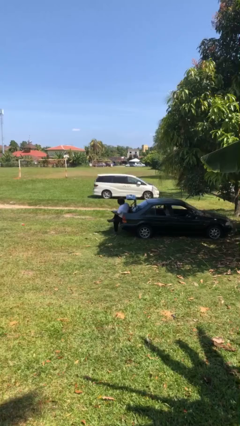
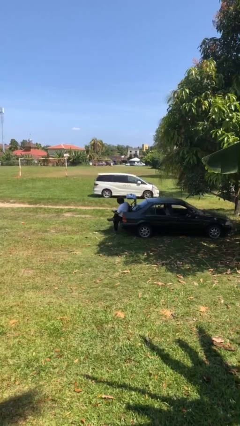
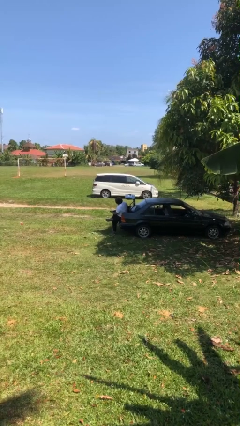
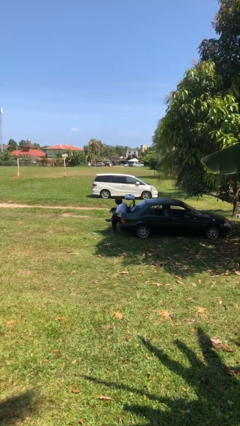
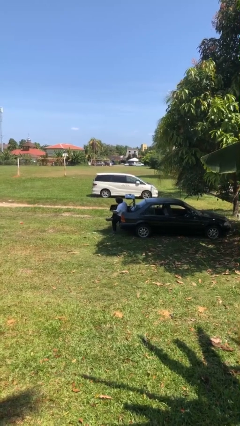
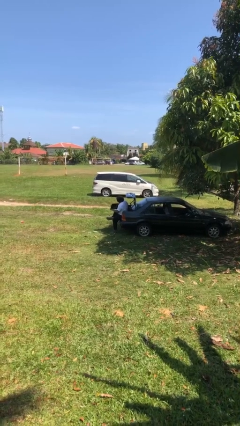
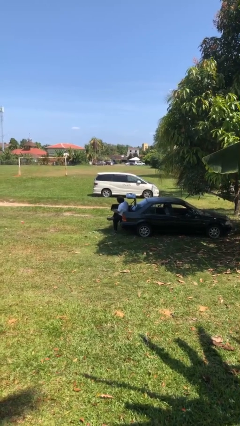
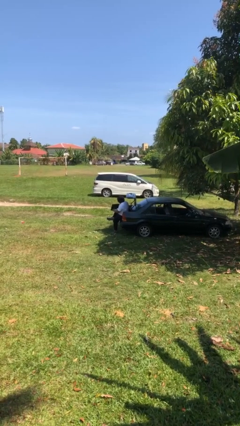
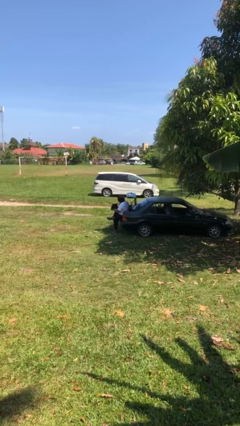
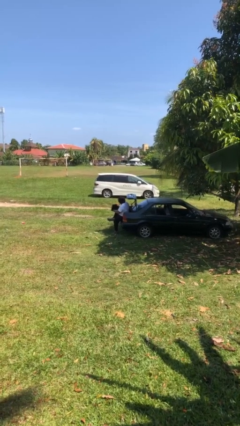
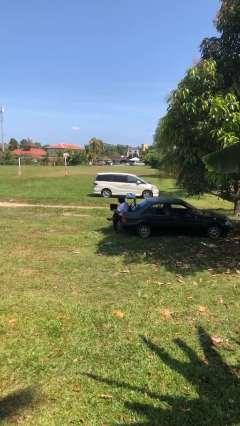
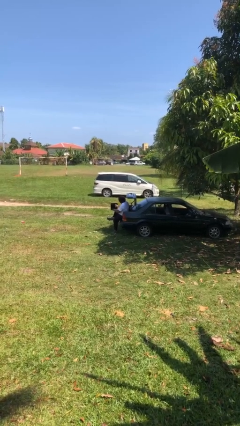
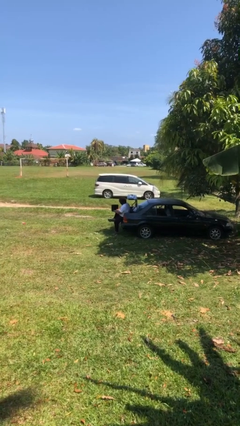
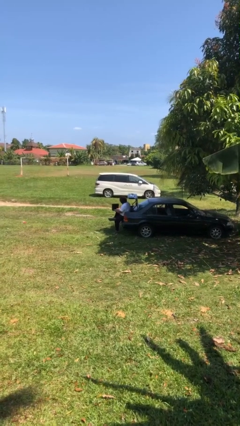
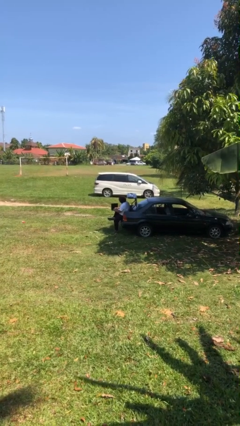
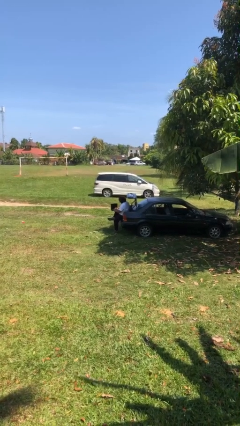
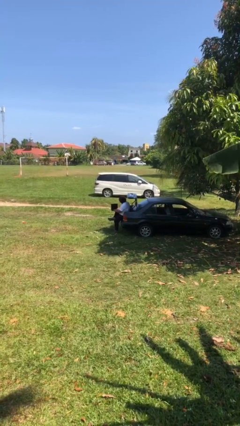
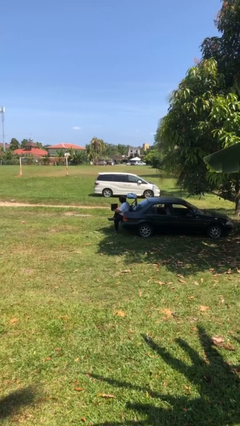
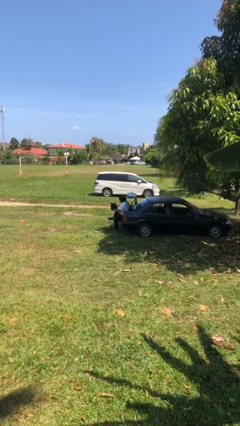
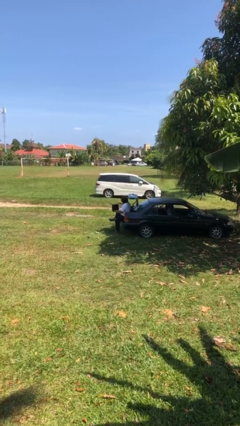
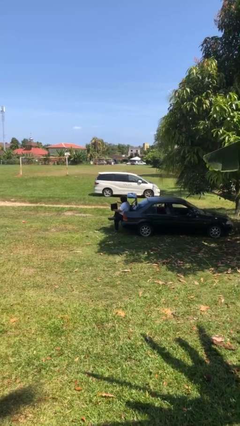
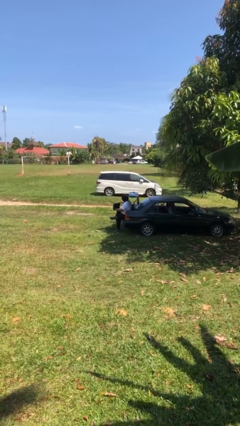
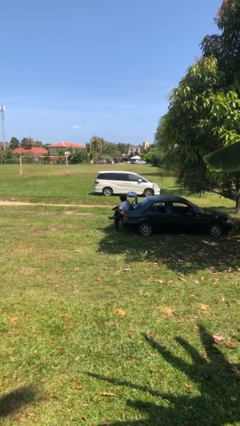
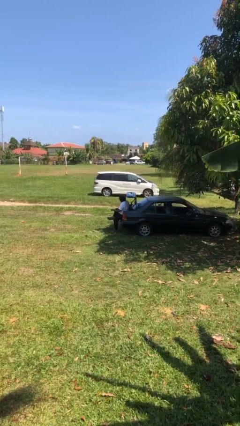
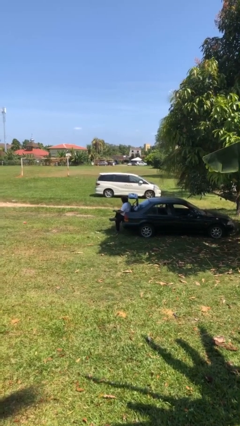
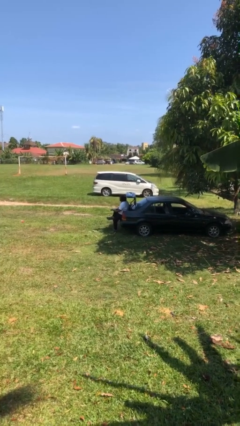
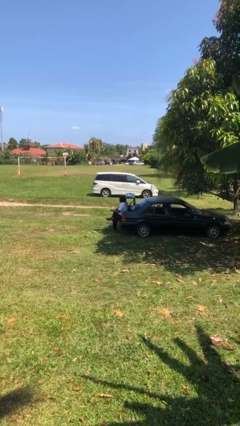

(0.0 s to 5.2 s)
person interacts with laptop

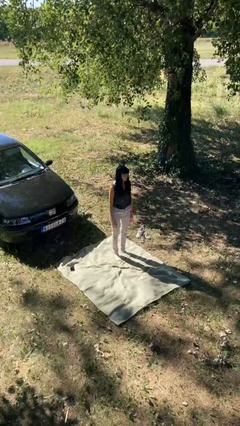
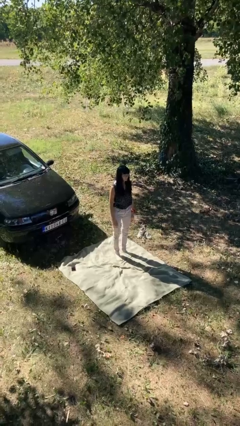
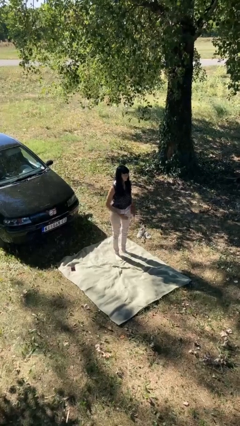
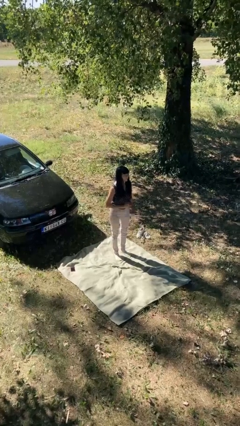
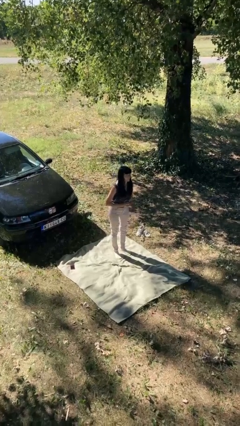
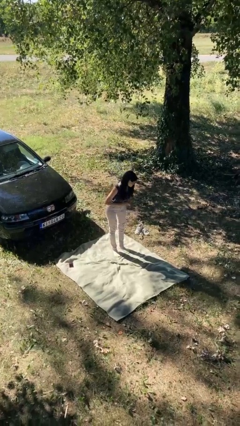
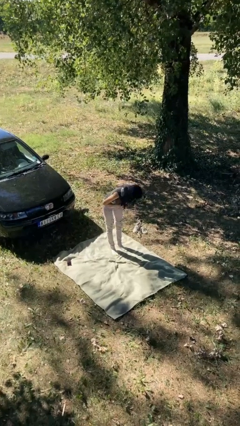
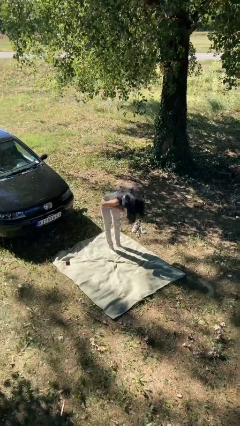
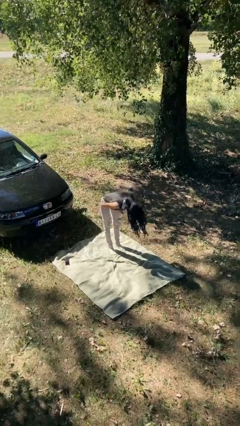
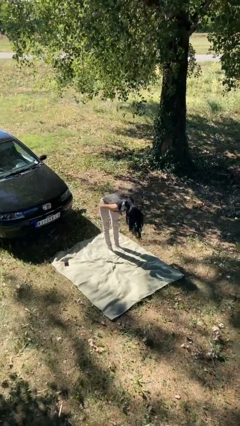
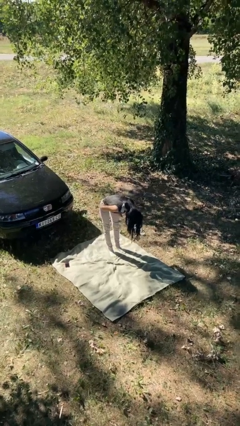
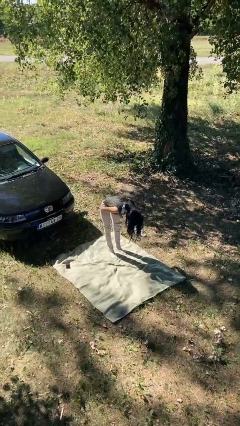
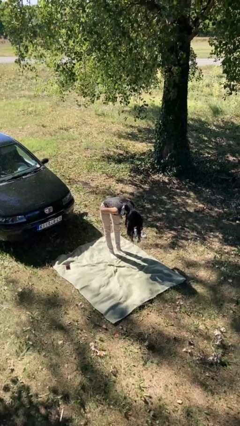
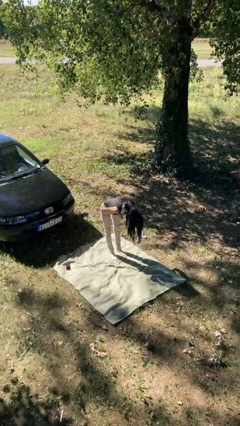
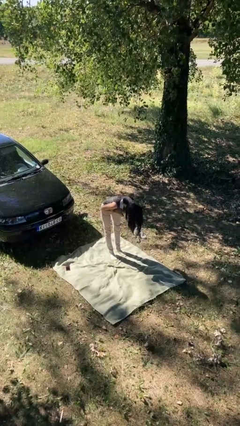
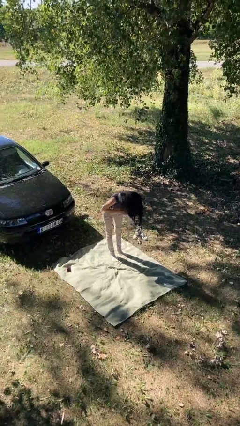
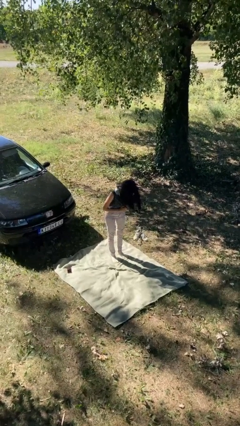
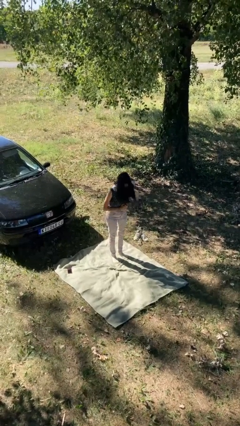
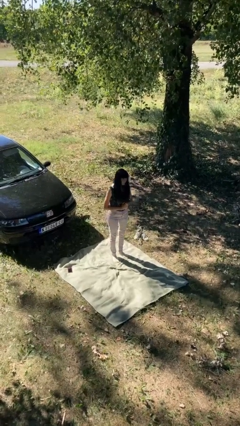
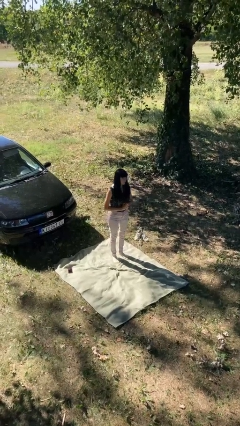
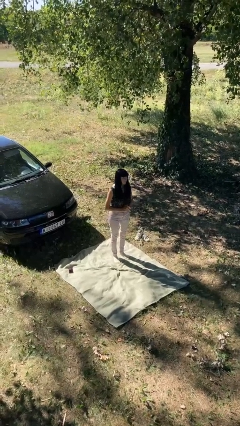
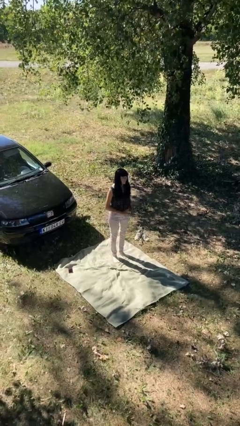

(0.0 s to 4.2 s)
person bows

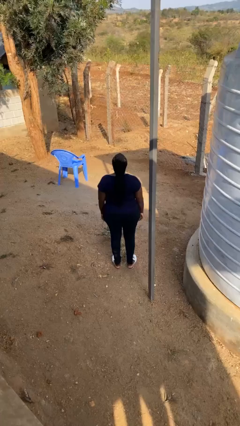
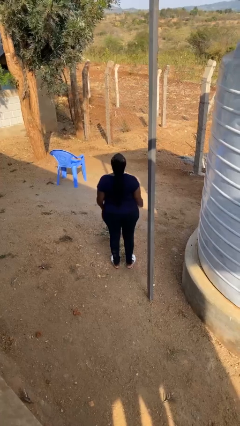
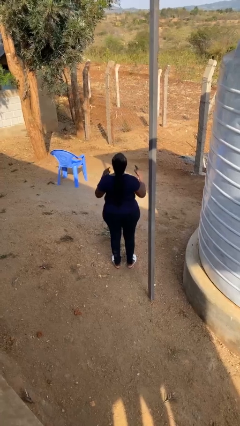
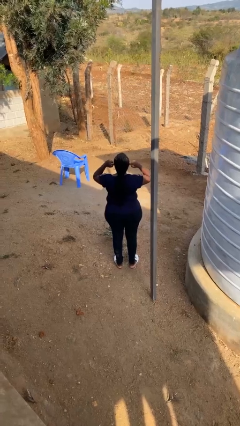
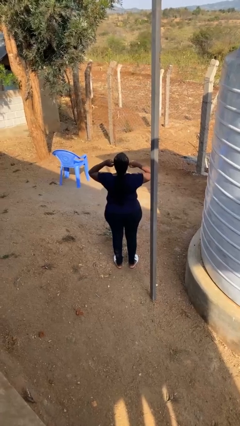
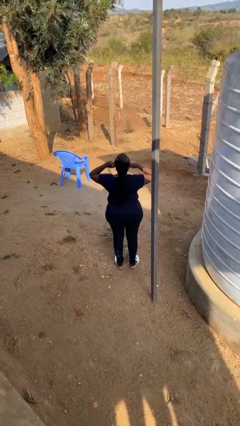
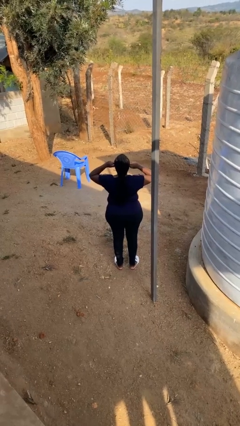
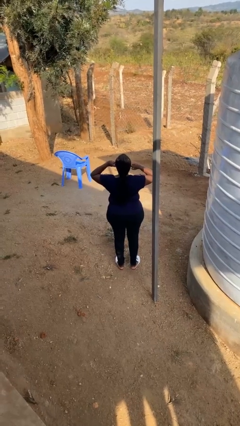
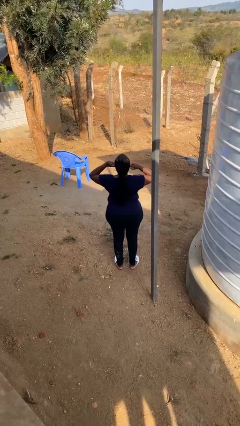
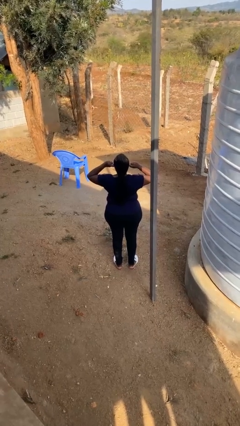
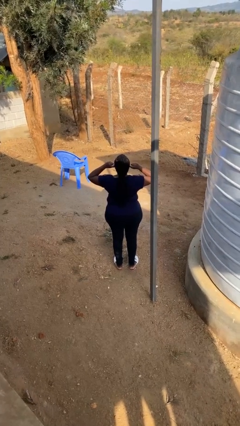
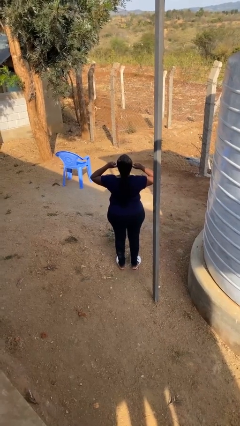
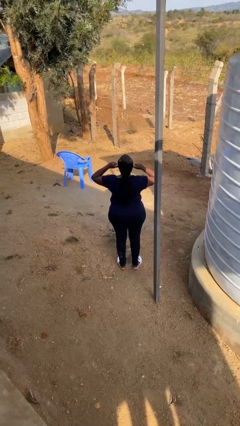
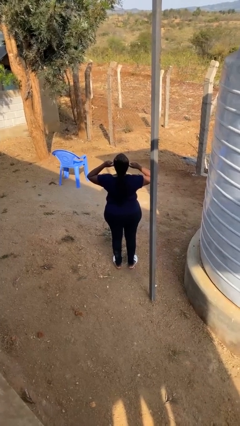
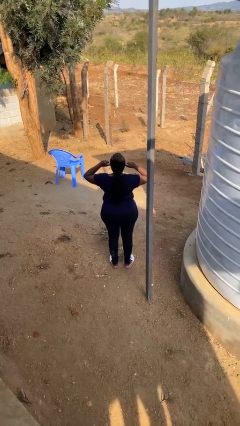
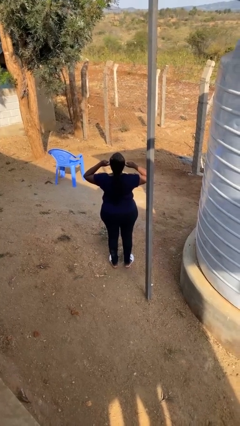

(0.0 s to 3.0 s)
person puts fingers in ear

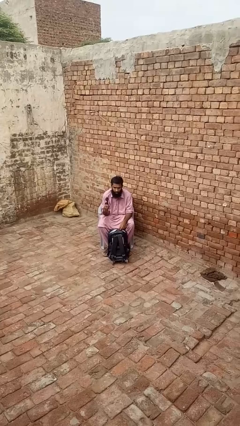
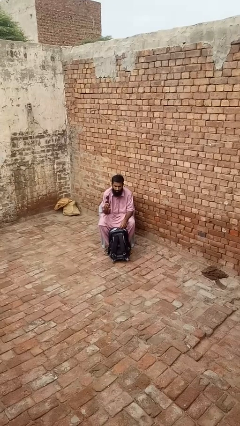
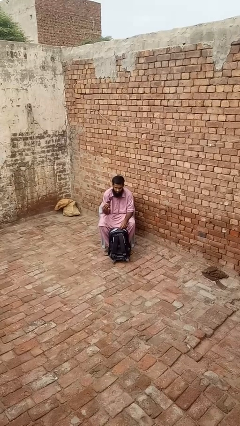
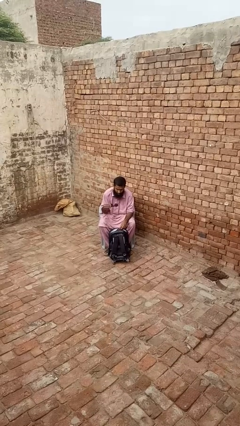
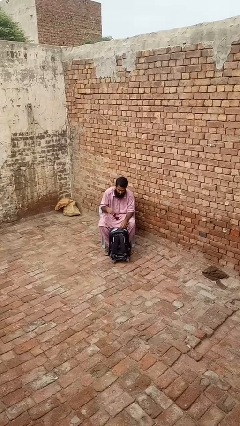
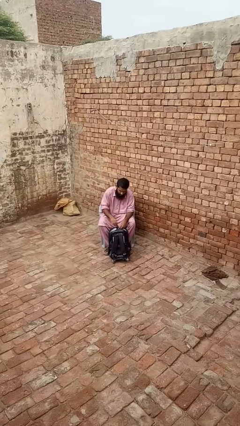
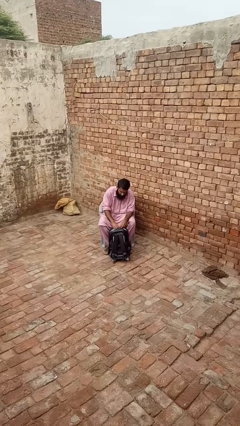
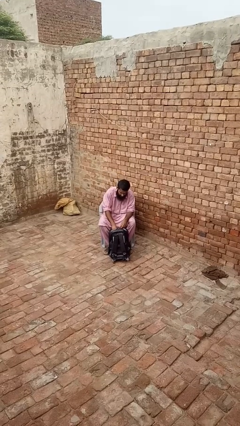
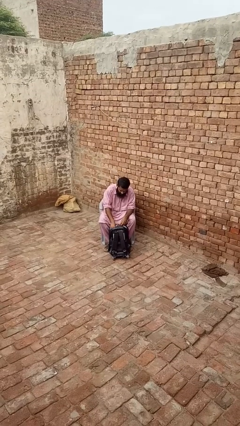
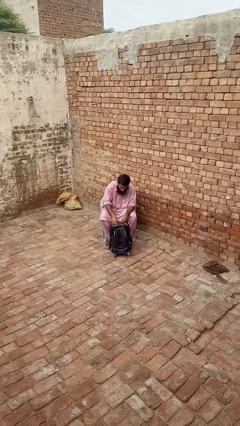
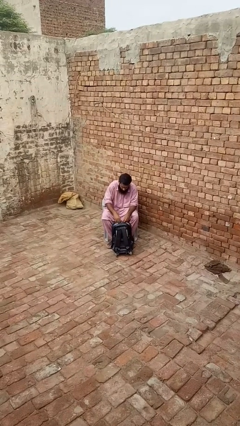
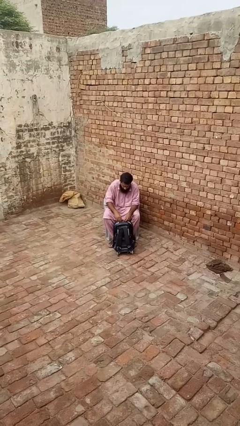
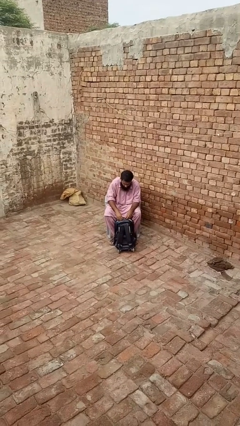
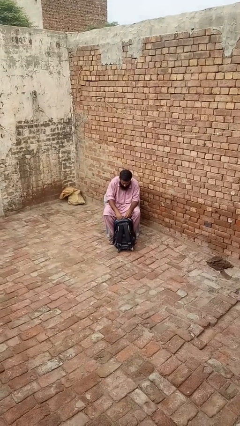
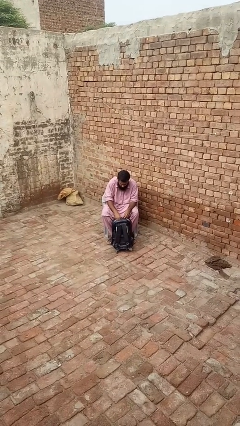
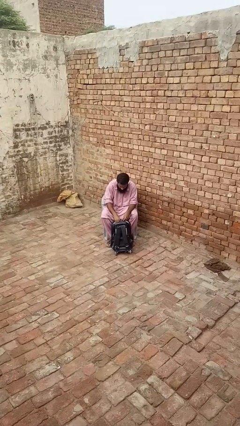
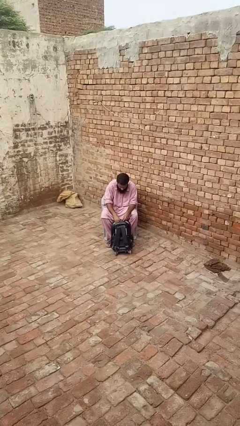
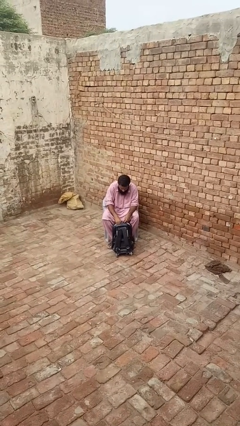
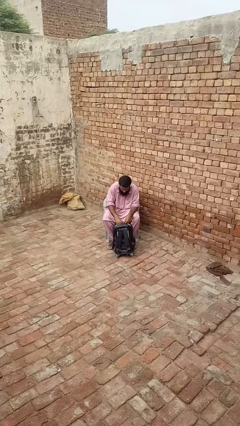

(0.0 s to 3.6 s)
person puts object into backpack

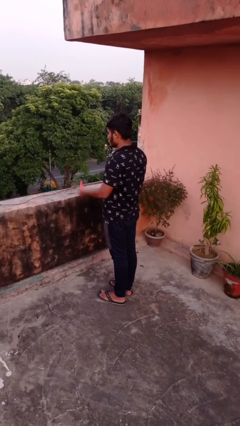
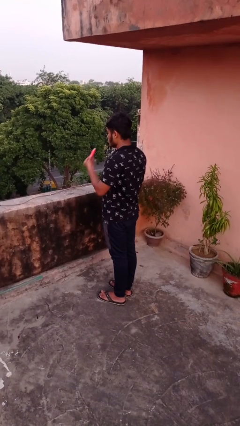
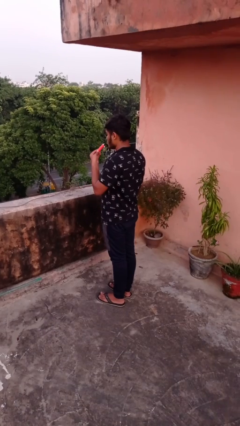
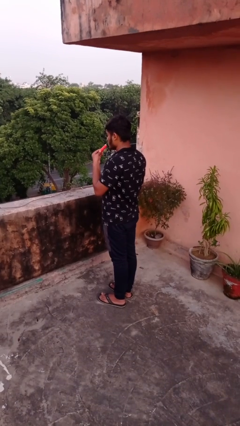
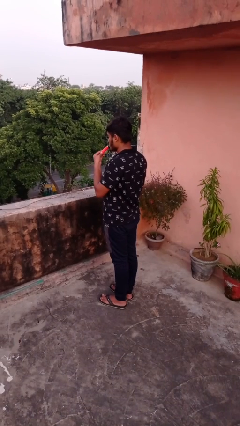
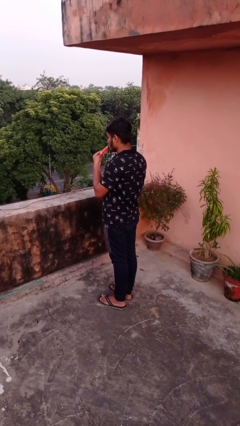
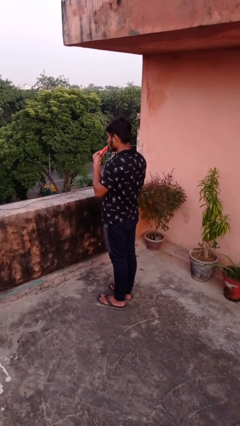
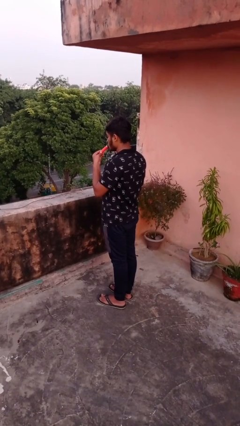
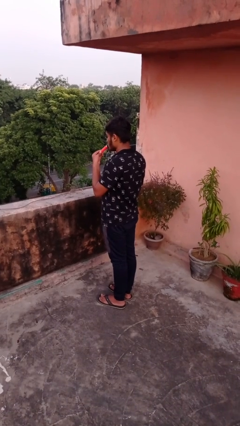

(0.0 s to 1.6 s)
person vapes
